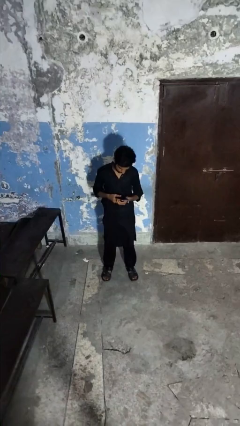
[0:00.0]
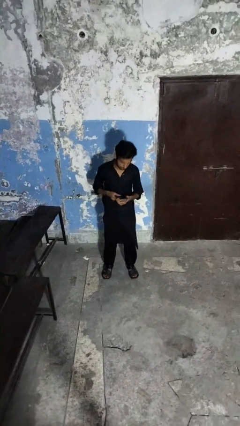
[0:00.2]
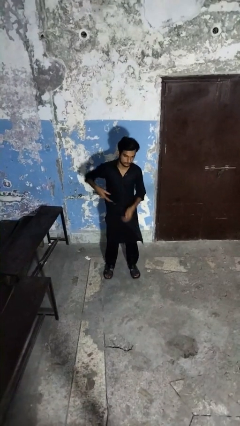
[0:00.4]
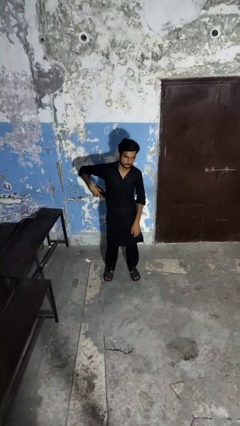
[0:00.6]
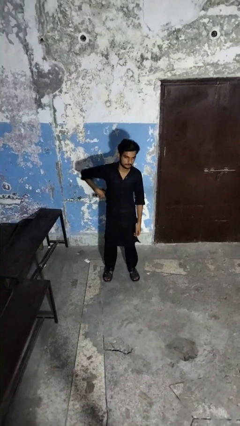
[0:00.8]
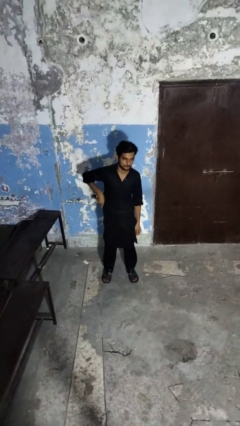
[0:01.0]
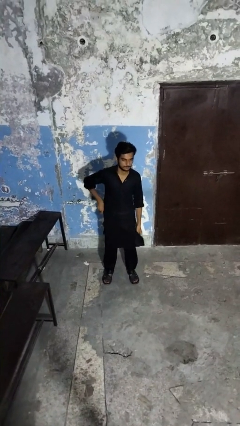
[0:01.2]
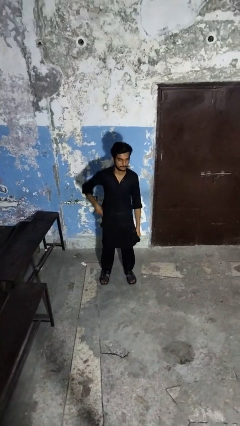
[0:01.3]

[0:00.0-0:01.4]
person puts phone into pocket

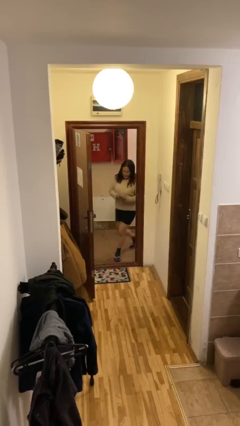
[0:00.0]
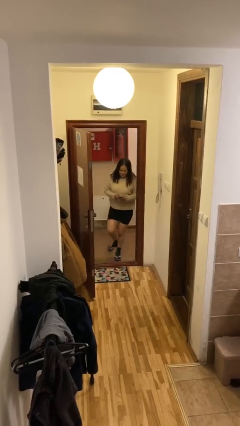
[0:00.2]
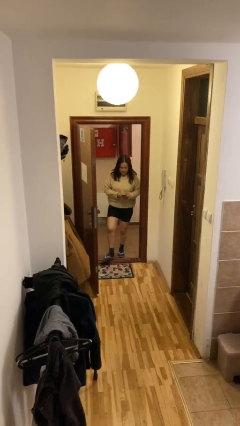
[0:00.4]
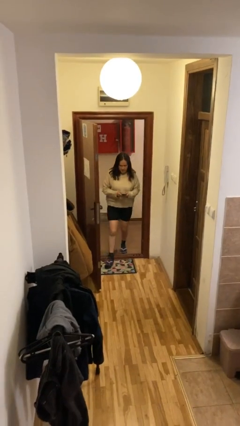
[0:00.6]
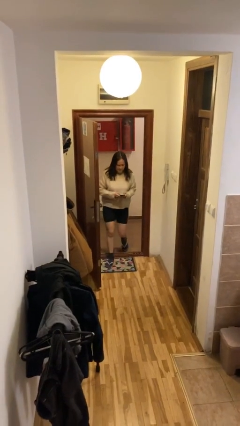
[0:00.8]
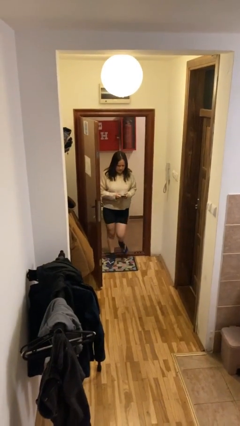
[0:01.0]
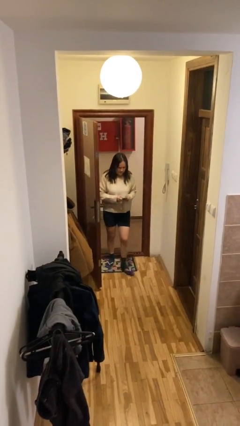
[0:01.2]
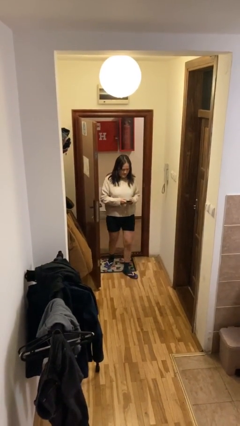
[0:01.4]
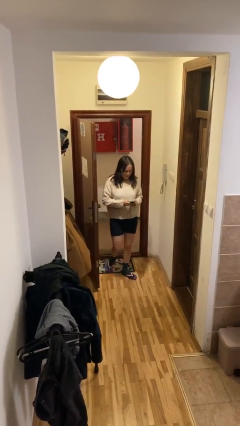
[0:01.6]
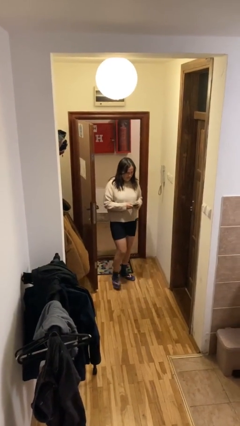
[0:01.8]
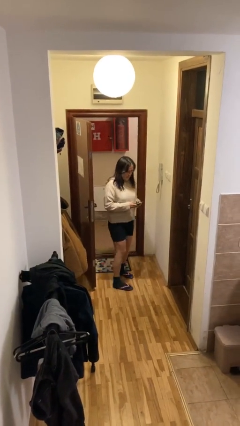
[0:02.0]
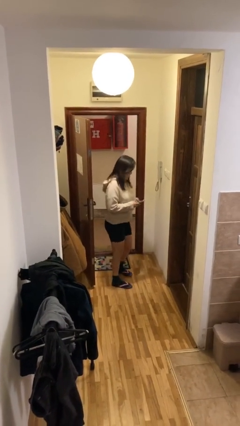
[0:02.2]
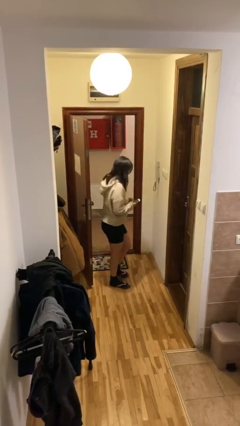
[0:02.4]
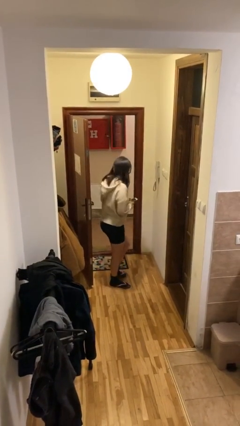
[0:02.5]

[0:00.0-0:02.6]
person enters scene through structure

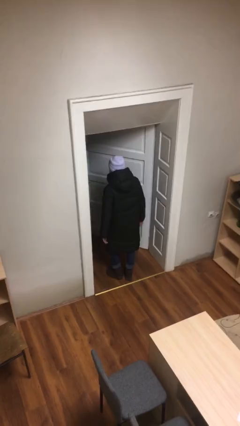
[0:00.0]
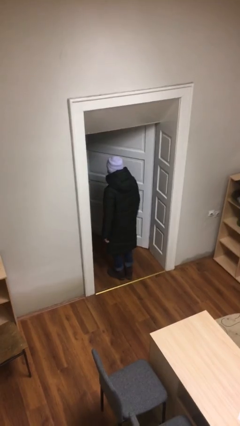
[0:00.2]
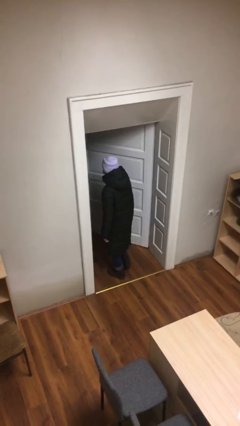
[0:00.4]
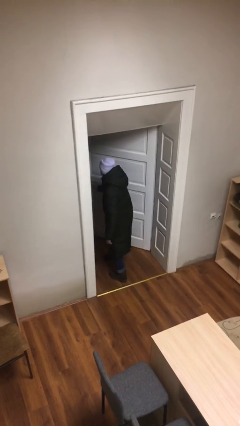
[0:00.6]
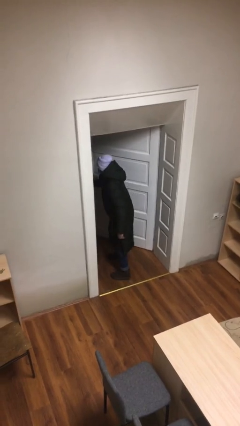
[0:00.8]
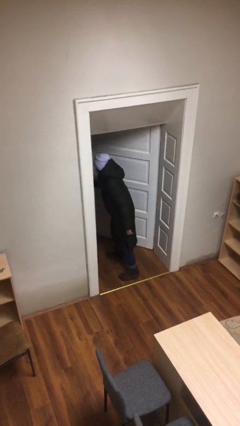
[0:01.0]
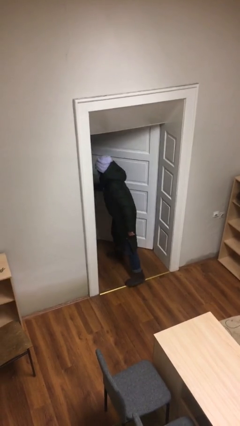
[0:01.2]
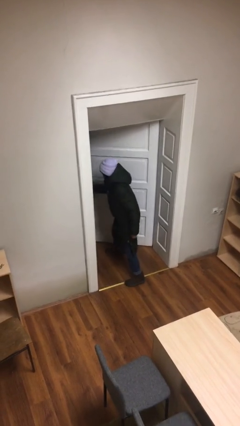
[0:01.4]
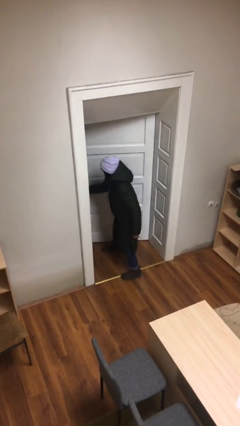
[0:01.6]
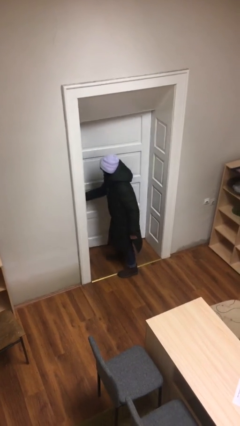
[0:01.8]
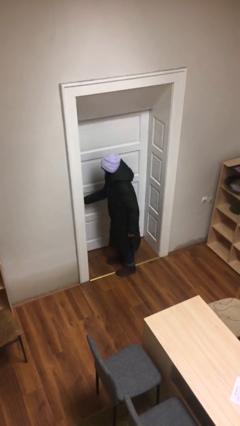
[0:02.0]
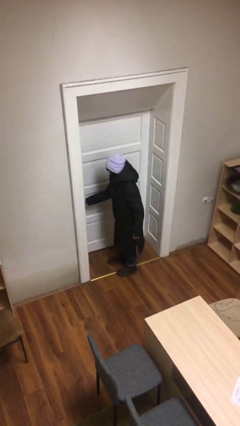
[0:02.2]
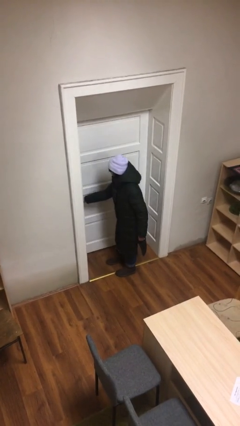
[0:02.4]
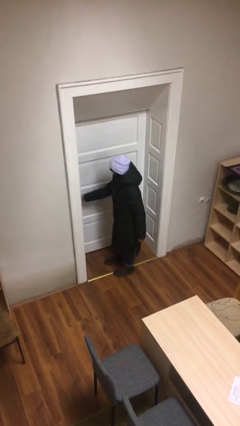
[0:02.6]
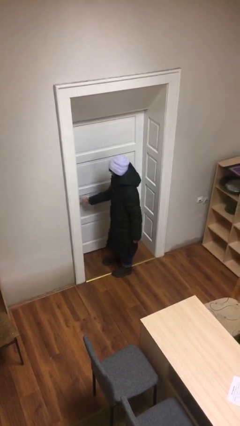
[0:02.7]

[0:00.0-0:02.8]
person closes facility door

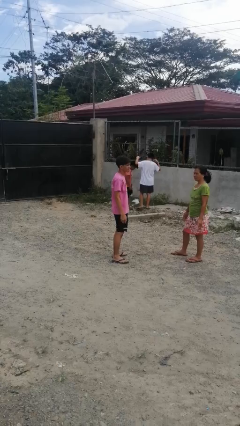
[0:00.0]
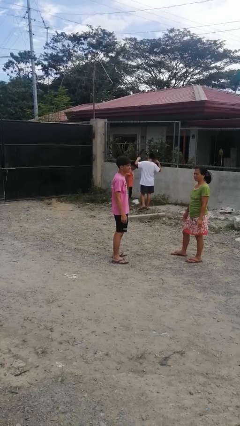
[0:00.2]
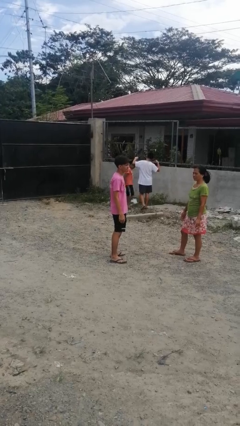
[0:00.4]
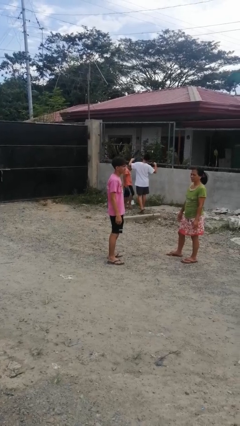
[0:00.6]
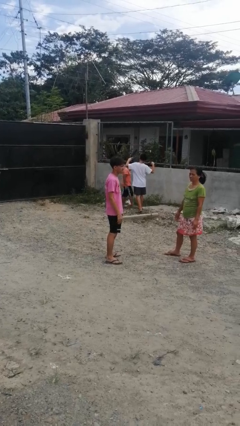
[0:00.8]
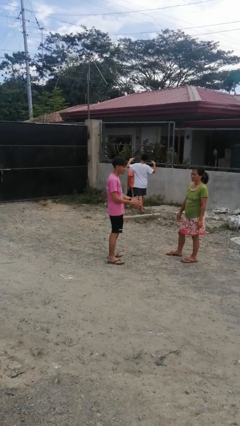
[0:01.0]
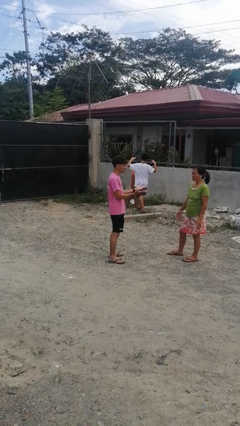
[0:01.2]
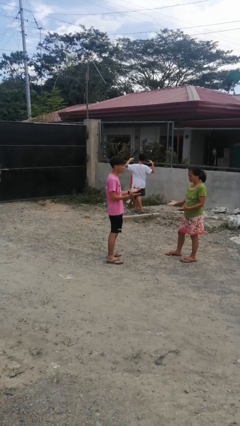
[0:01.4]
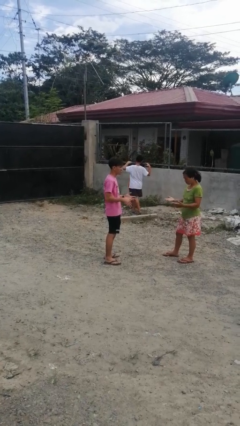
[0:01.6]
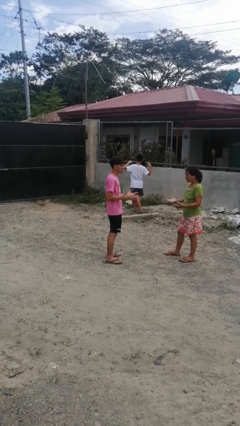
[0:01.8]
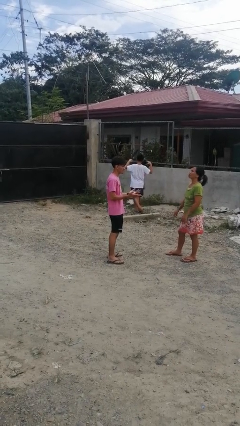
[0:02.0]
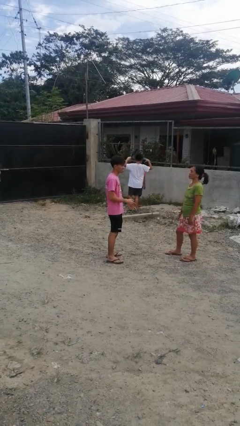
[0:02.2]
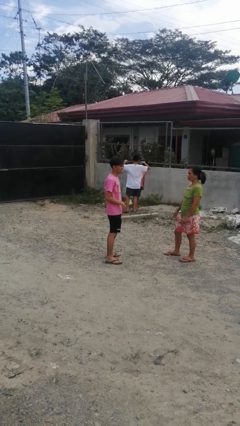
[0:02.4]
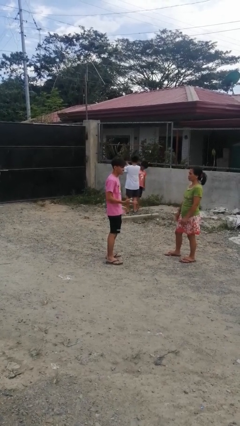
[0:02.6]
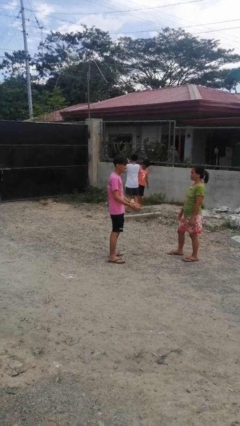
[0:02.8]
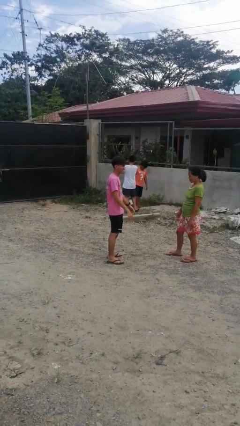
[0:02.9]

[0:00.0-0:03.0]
person talks to person

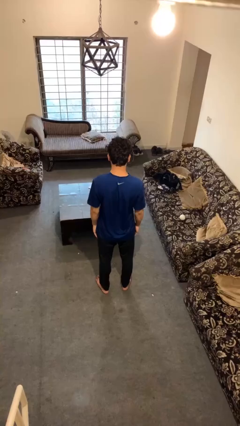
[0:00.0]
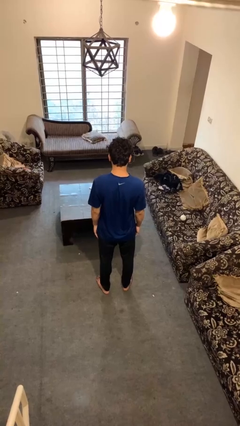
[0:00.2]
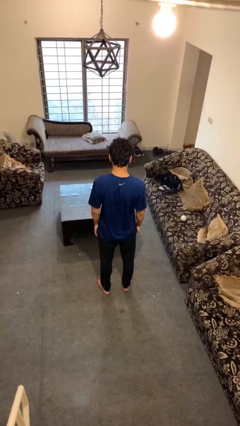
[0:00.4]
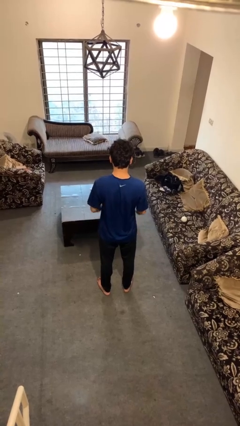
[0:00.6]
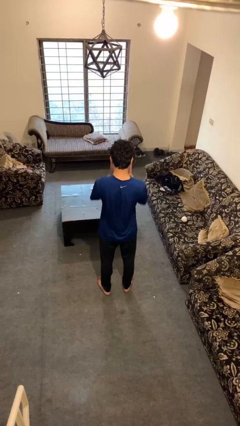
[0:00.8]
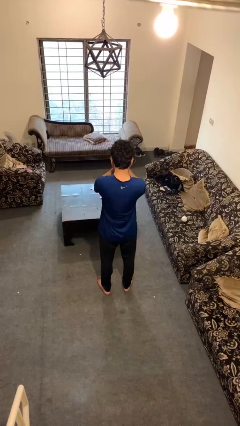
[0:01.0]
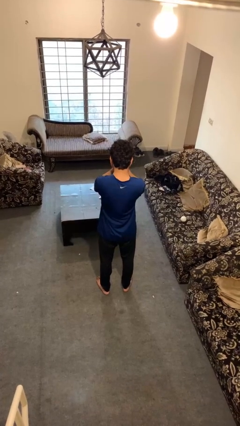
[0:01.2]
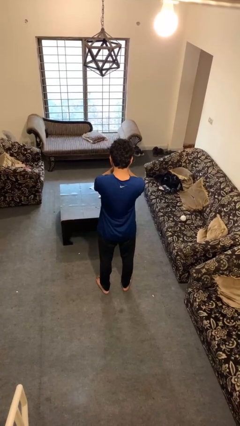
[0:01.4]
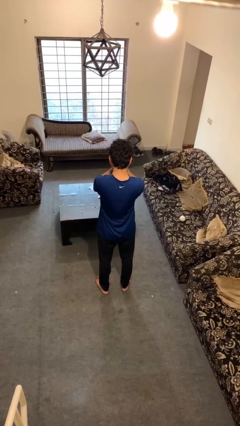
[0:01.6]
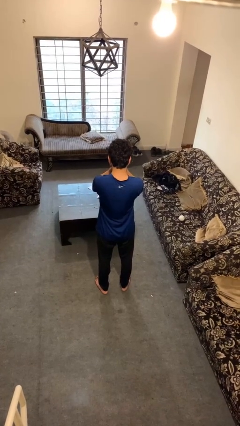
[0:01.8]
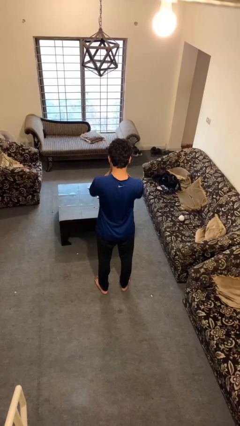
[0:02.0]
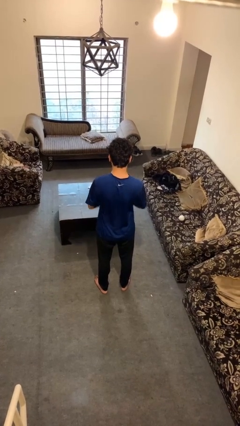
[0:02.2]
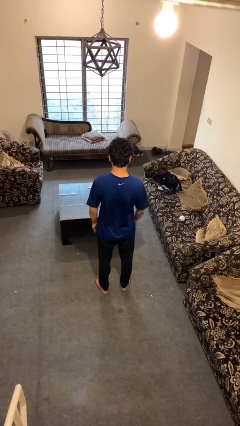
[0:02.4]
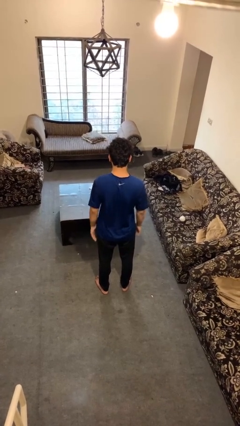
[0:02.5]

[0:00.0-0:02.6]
person covers face with hands

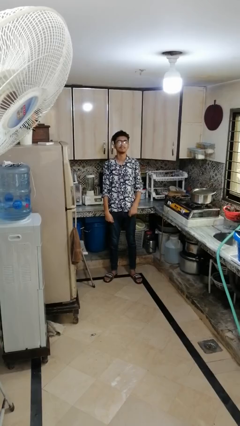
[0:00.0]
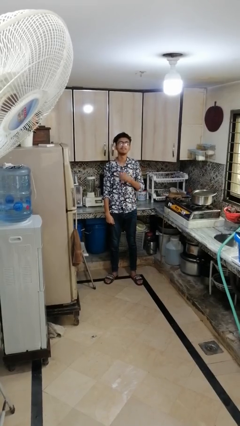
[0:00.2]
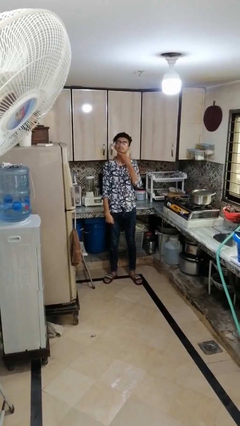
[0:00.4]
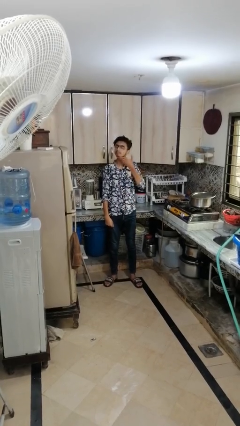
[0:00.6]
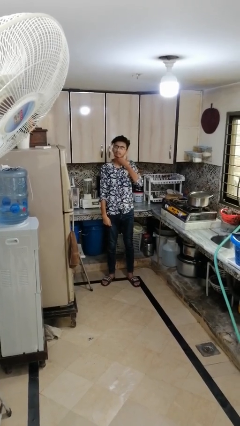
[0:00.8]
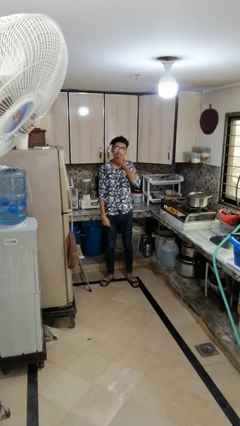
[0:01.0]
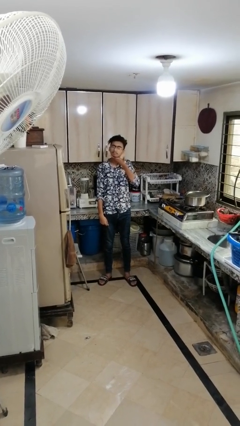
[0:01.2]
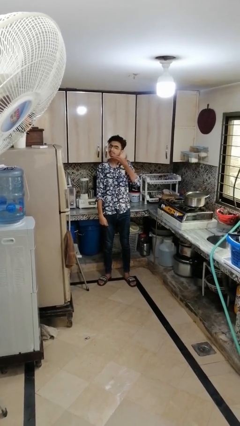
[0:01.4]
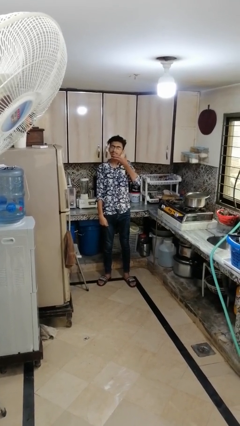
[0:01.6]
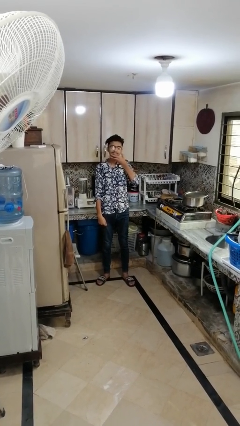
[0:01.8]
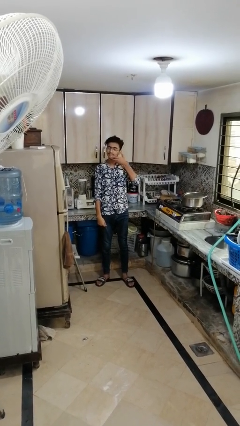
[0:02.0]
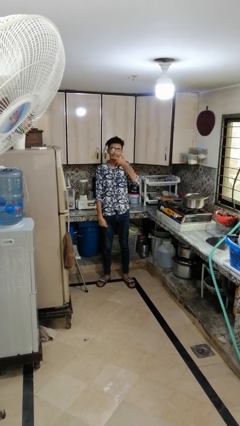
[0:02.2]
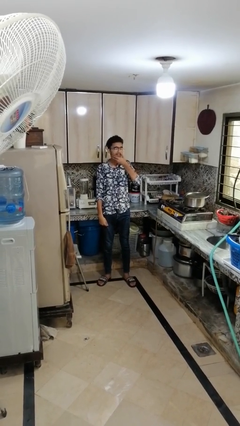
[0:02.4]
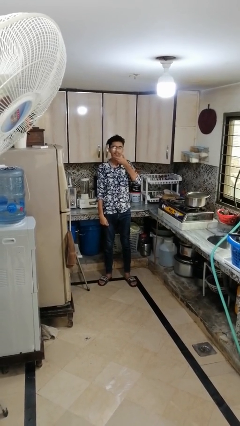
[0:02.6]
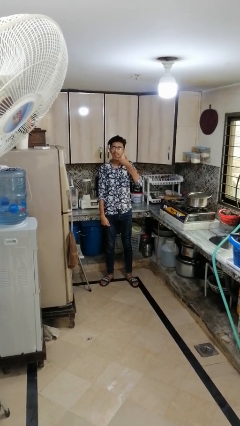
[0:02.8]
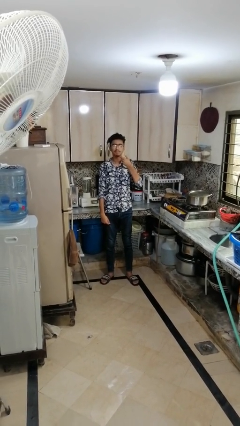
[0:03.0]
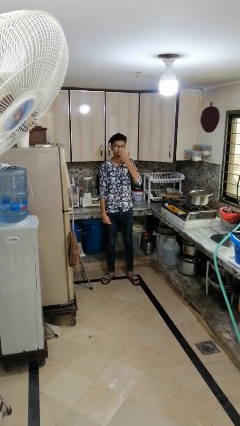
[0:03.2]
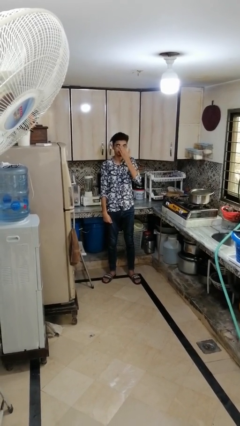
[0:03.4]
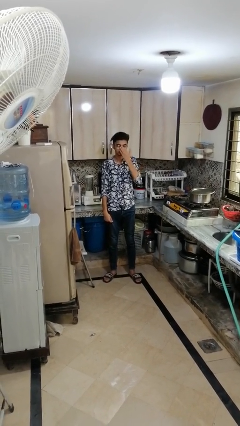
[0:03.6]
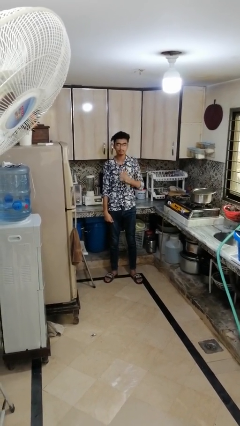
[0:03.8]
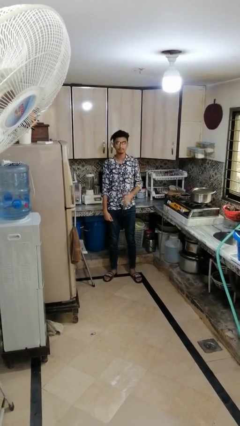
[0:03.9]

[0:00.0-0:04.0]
person strokes chin

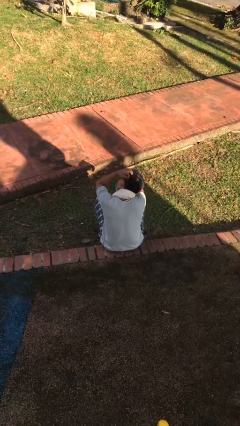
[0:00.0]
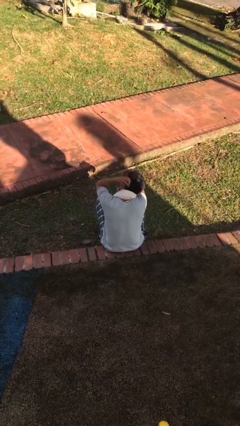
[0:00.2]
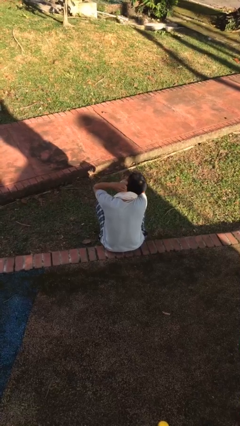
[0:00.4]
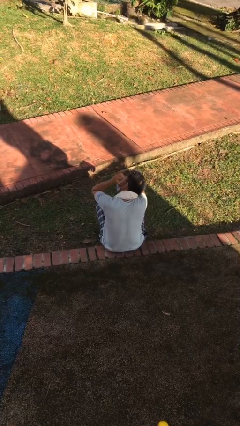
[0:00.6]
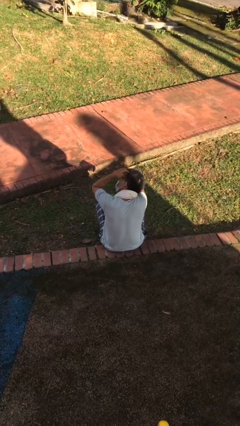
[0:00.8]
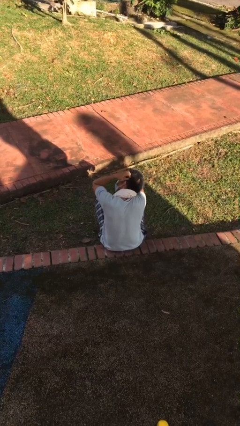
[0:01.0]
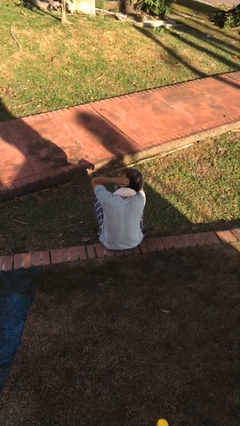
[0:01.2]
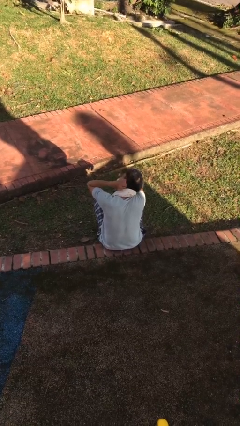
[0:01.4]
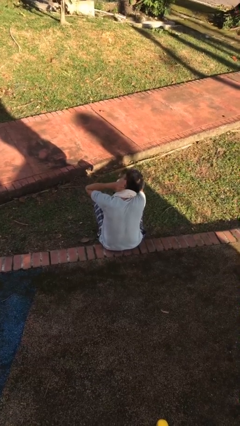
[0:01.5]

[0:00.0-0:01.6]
person strokes hair
